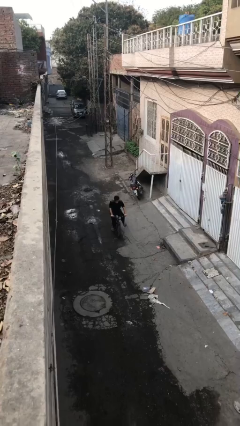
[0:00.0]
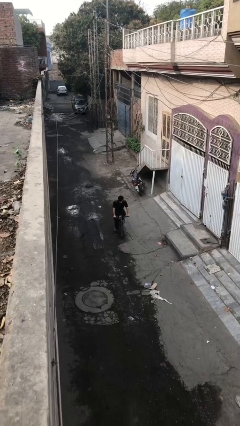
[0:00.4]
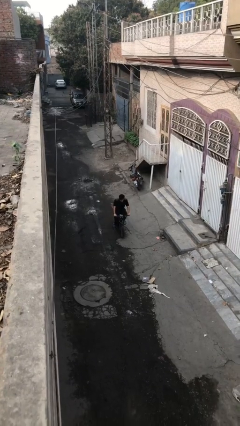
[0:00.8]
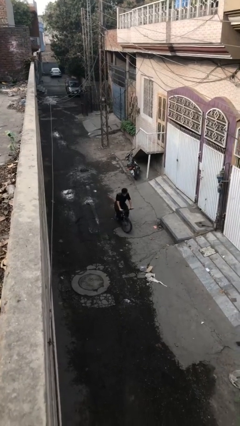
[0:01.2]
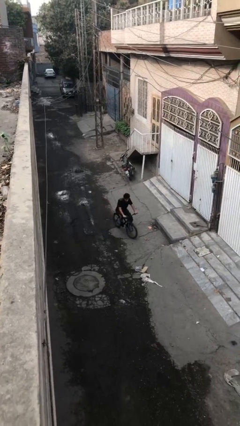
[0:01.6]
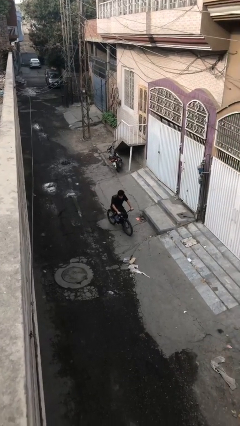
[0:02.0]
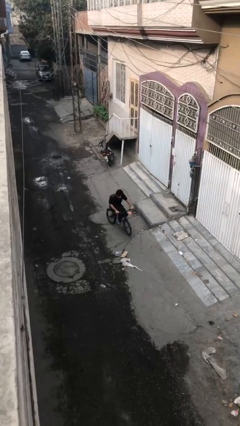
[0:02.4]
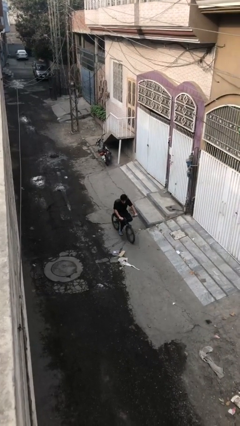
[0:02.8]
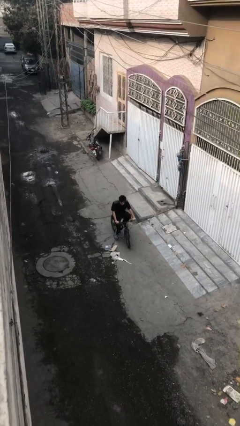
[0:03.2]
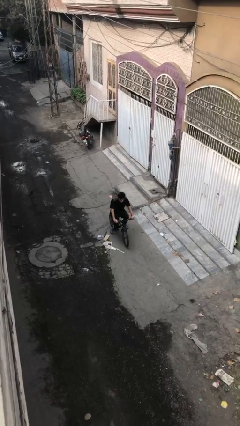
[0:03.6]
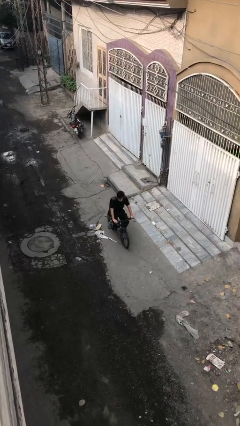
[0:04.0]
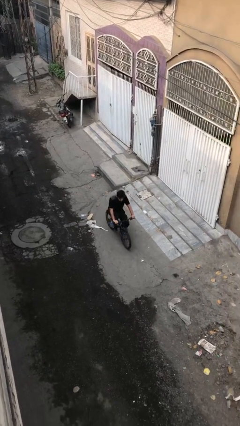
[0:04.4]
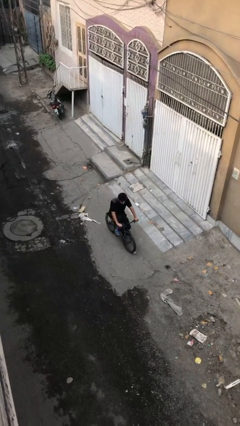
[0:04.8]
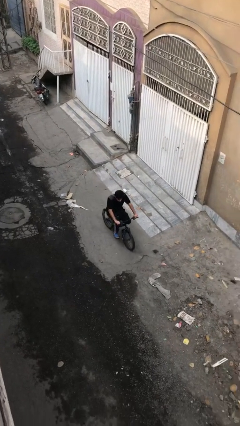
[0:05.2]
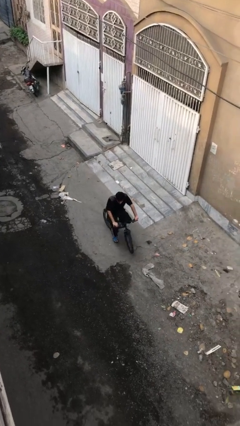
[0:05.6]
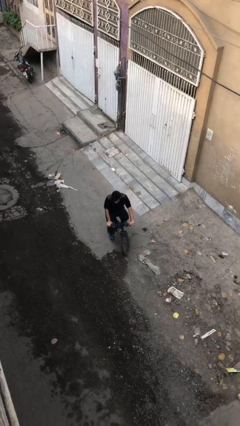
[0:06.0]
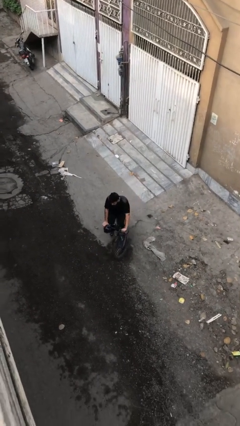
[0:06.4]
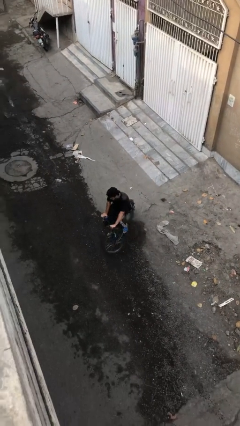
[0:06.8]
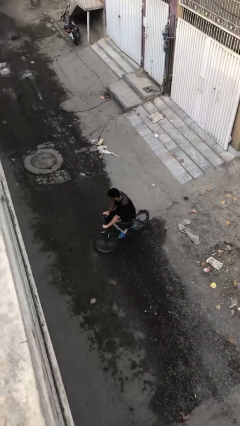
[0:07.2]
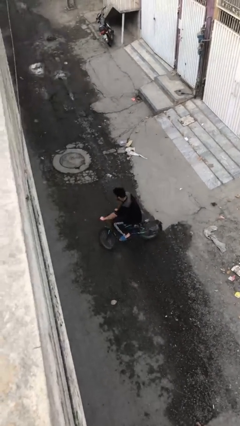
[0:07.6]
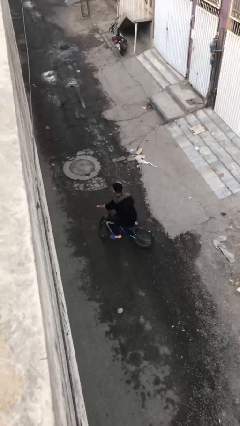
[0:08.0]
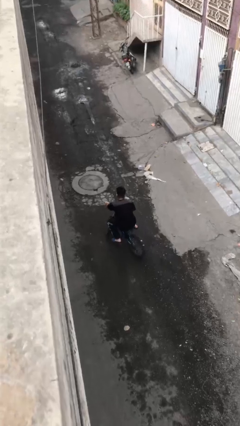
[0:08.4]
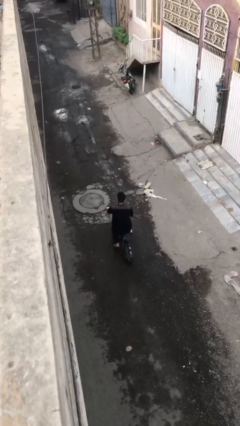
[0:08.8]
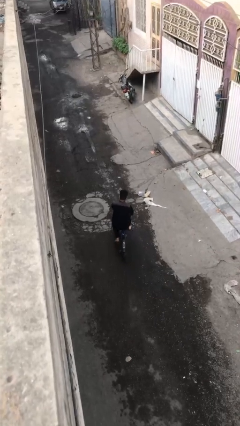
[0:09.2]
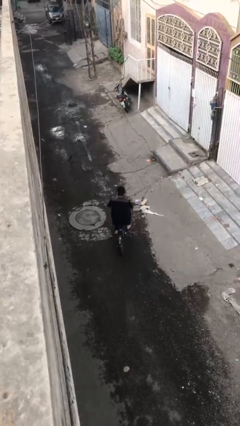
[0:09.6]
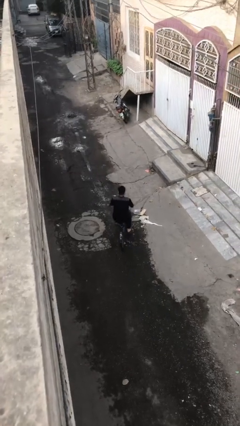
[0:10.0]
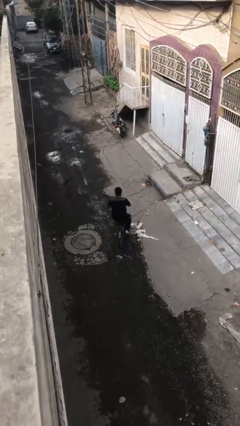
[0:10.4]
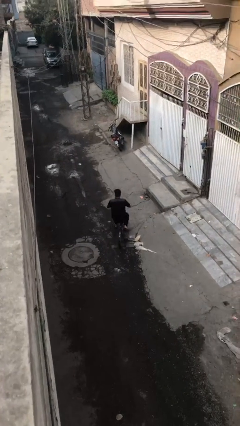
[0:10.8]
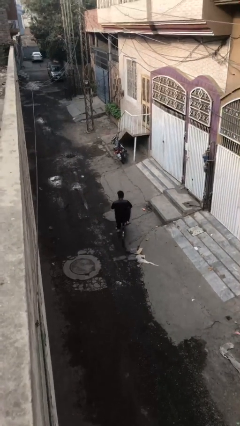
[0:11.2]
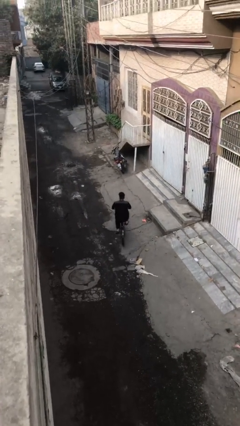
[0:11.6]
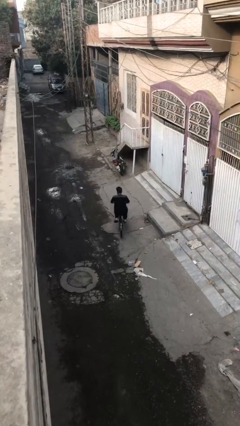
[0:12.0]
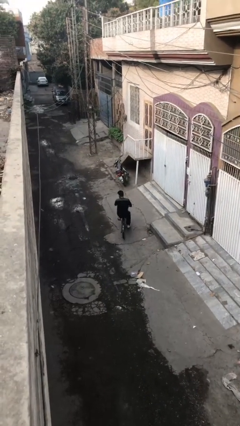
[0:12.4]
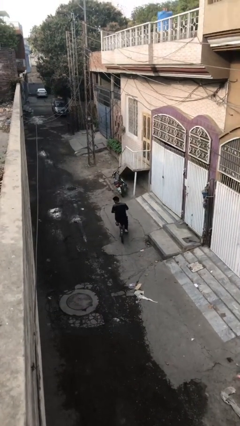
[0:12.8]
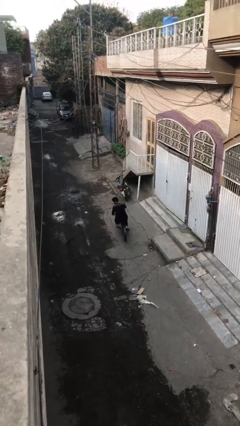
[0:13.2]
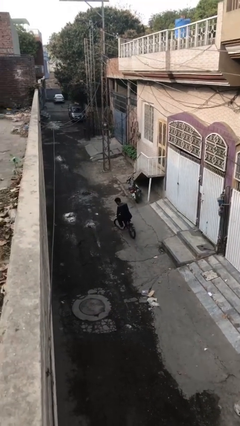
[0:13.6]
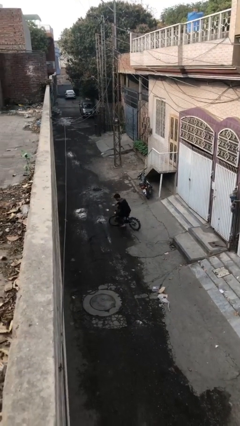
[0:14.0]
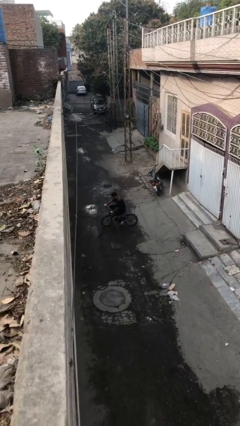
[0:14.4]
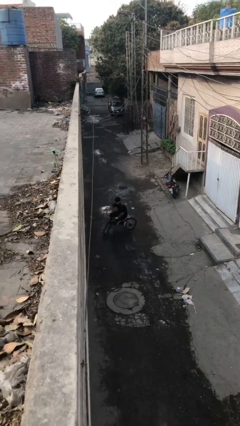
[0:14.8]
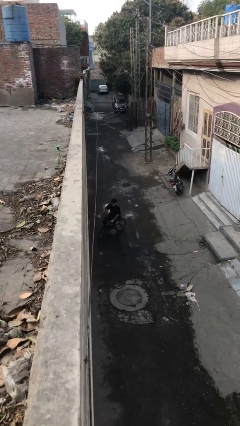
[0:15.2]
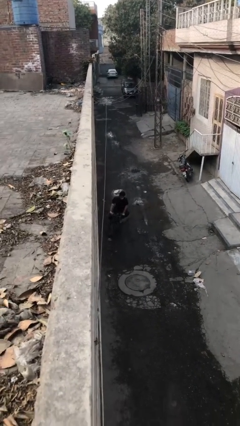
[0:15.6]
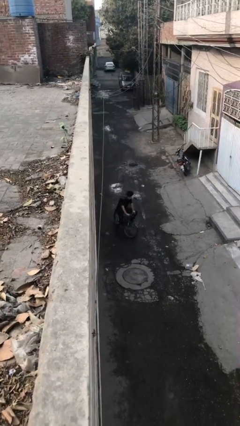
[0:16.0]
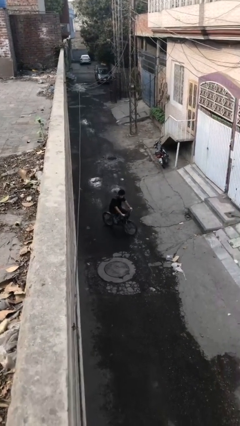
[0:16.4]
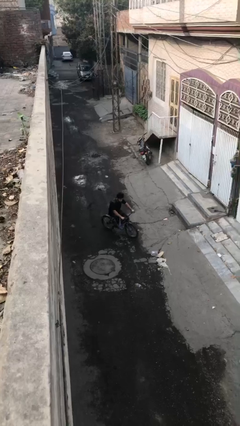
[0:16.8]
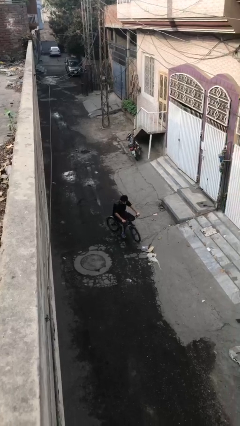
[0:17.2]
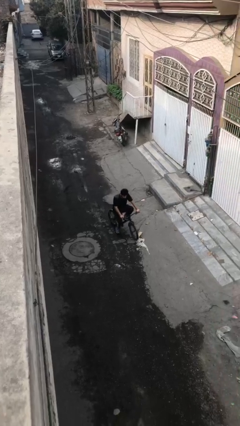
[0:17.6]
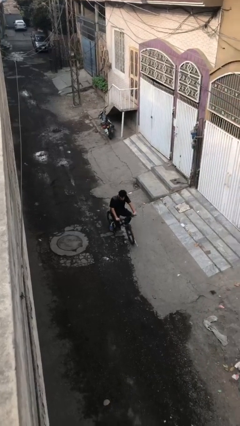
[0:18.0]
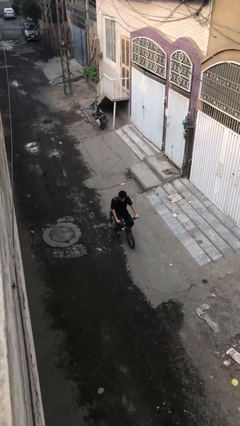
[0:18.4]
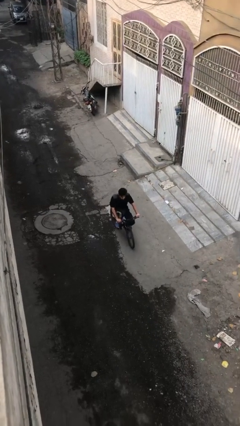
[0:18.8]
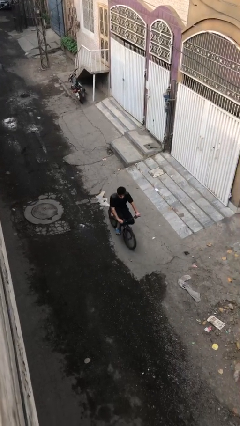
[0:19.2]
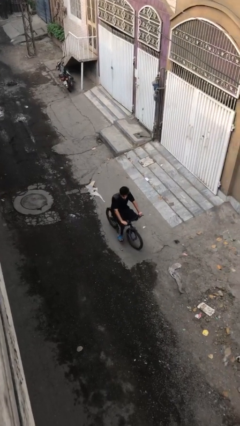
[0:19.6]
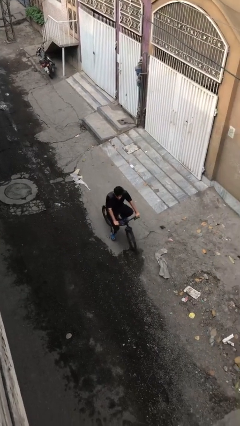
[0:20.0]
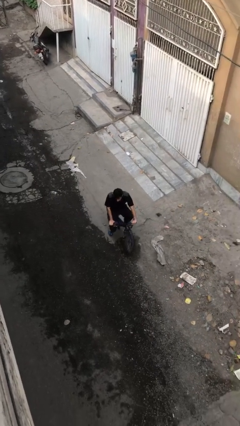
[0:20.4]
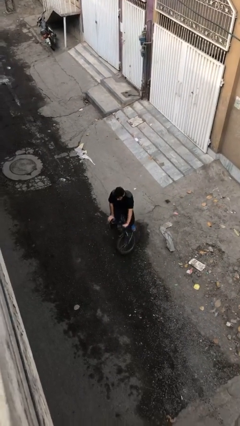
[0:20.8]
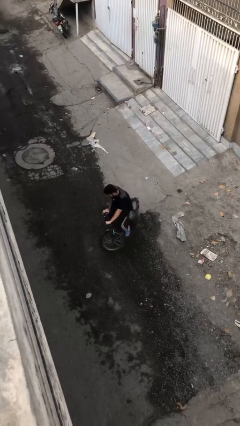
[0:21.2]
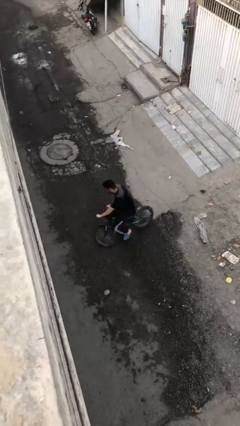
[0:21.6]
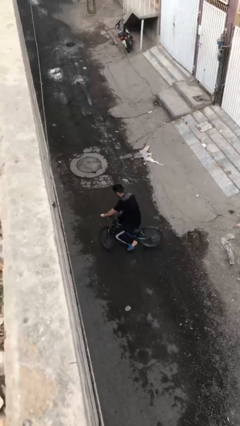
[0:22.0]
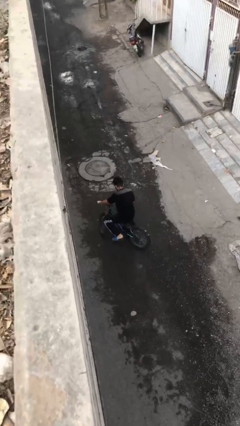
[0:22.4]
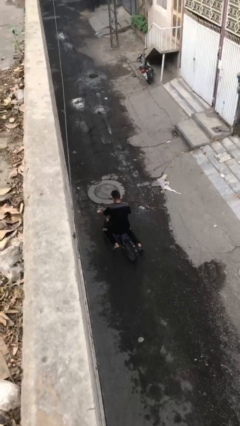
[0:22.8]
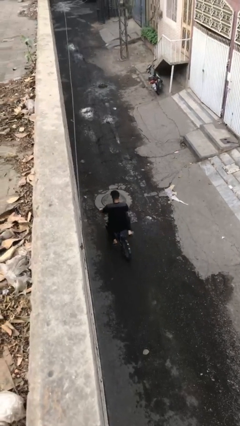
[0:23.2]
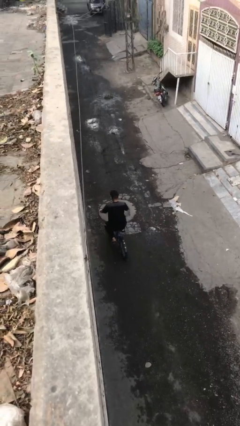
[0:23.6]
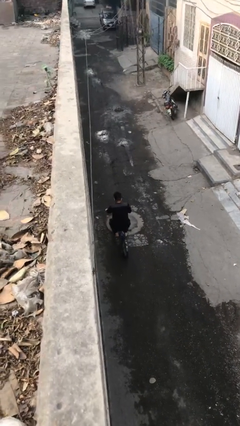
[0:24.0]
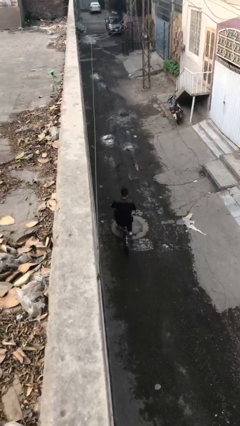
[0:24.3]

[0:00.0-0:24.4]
person rides bicycle

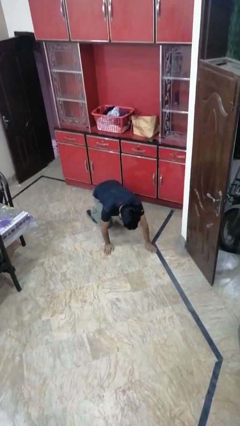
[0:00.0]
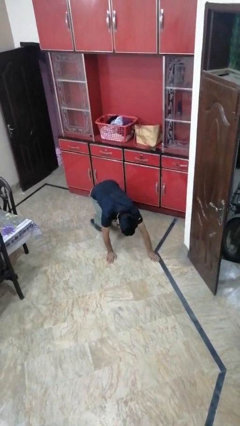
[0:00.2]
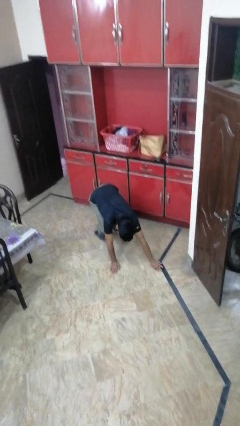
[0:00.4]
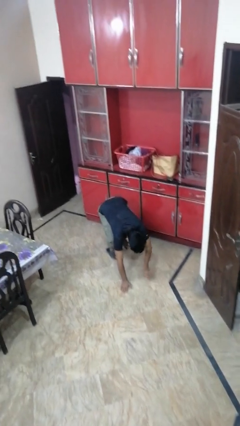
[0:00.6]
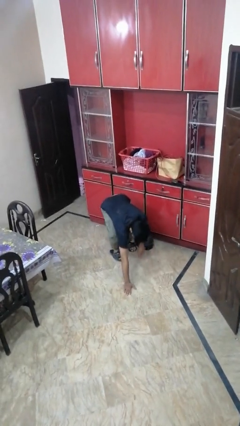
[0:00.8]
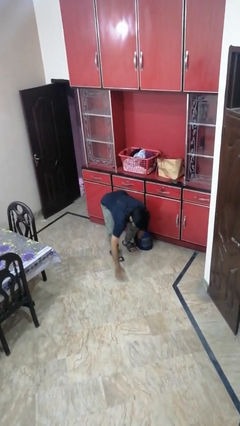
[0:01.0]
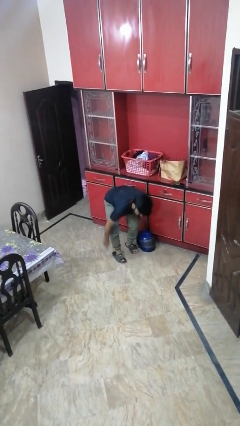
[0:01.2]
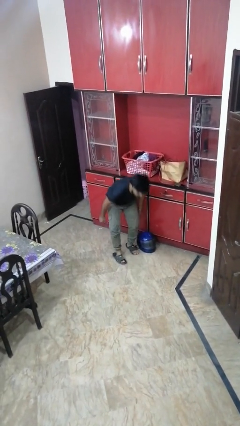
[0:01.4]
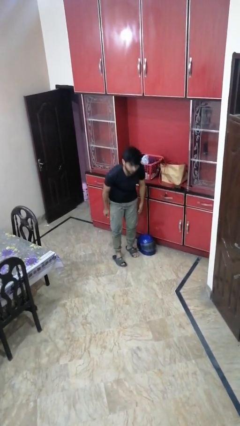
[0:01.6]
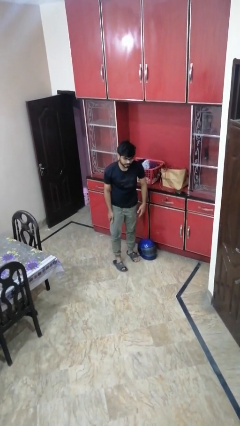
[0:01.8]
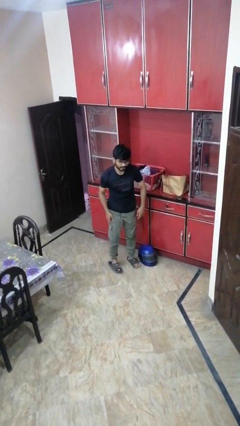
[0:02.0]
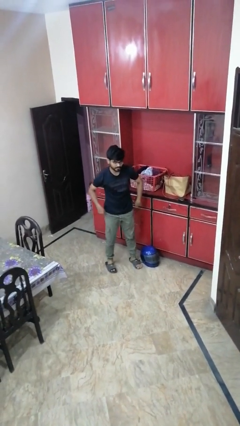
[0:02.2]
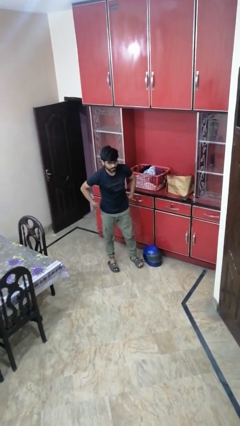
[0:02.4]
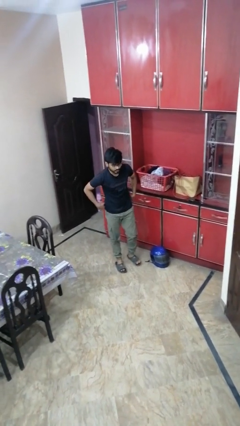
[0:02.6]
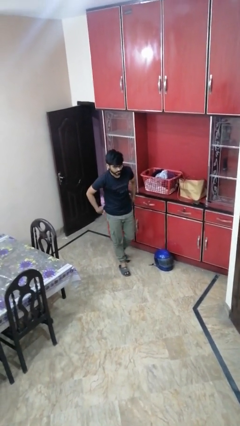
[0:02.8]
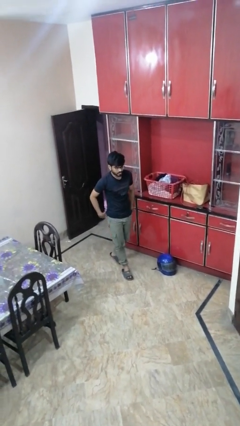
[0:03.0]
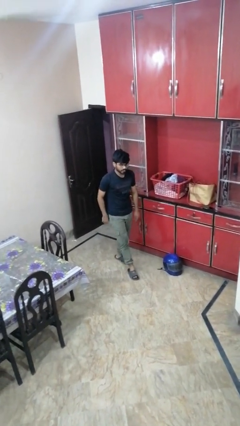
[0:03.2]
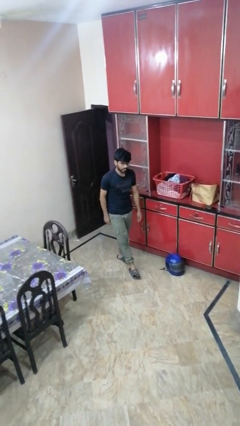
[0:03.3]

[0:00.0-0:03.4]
person stands up from floor

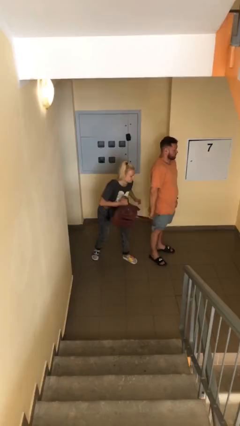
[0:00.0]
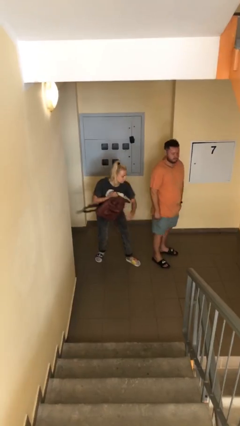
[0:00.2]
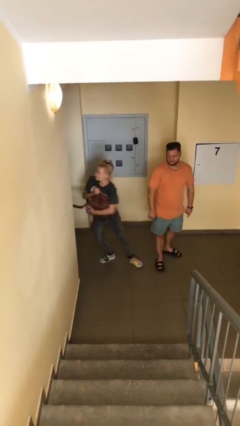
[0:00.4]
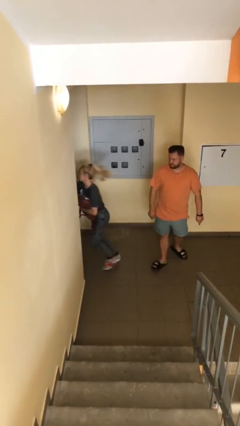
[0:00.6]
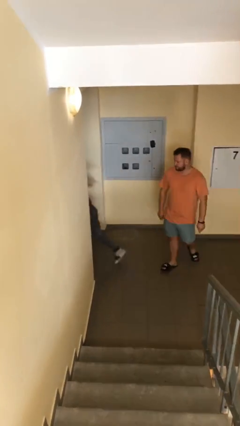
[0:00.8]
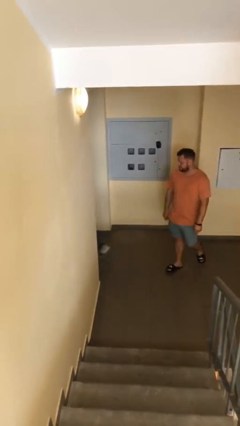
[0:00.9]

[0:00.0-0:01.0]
person steals object from person

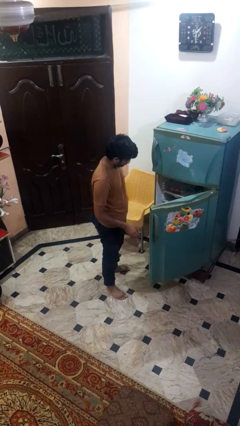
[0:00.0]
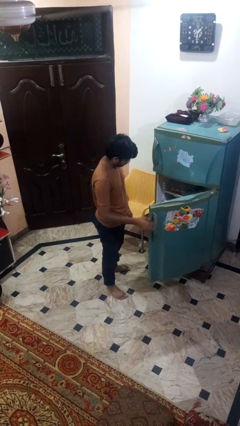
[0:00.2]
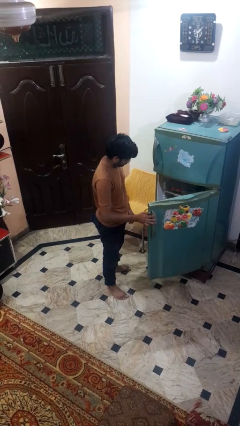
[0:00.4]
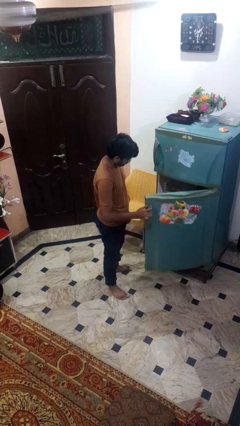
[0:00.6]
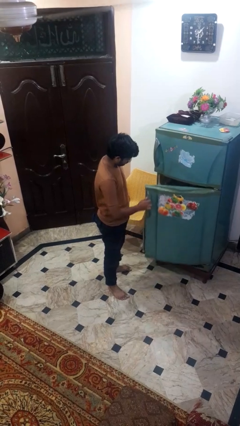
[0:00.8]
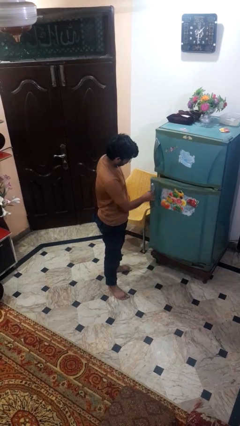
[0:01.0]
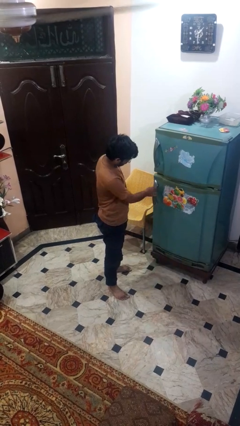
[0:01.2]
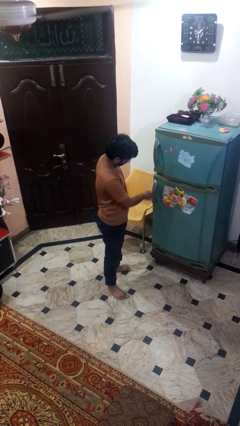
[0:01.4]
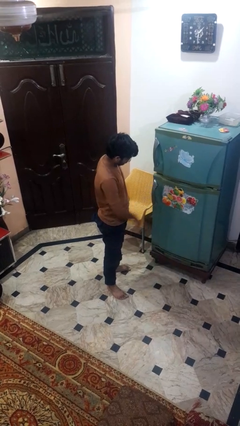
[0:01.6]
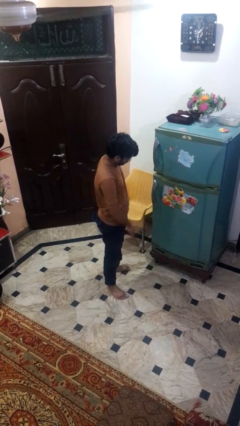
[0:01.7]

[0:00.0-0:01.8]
person closes refrigerator
